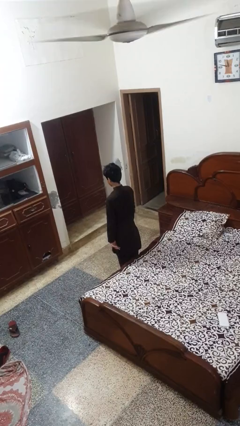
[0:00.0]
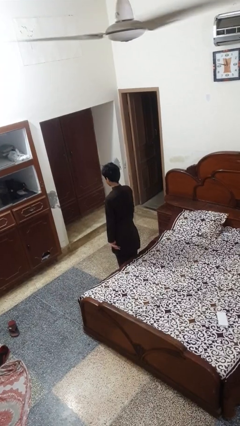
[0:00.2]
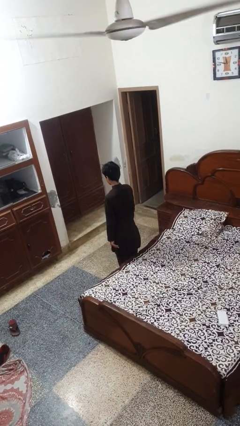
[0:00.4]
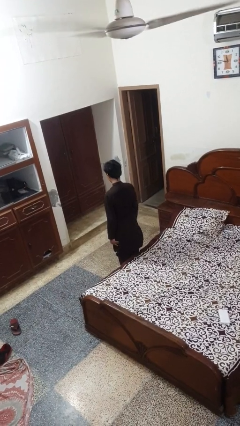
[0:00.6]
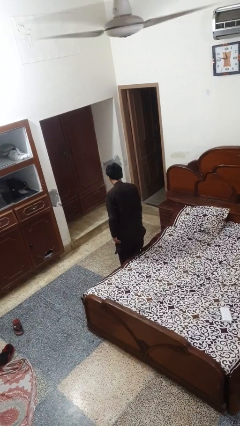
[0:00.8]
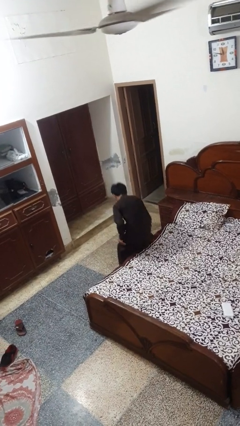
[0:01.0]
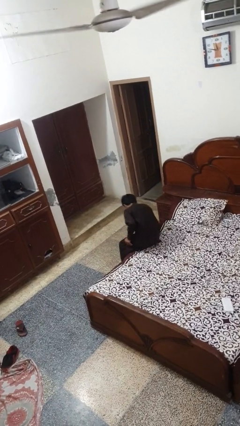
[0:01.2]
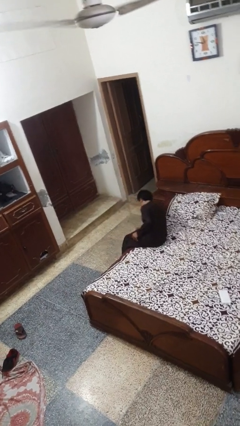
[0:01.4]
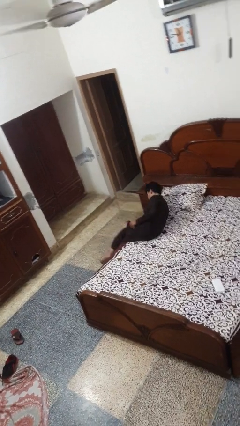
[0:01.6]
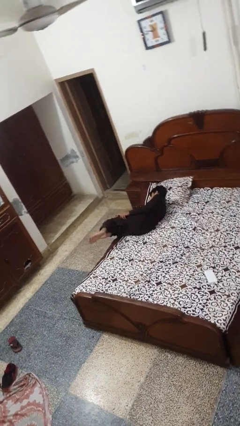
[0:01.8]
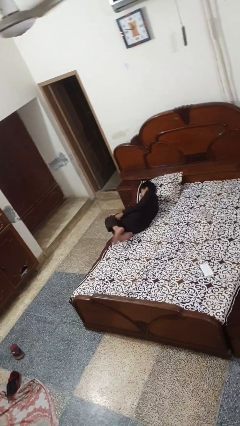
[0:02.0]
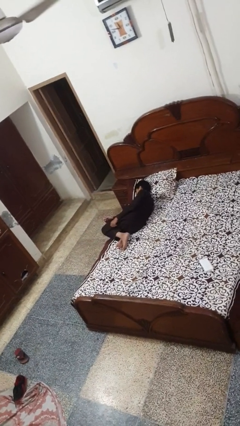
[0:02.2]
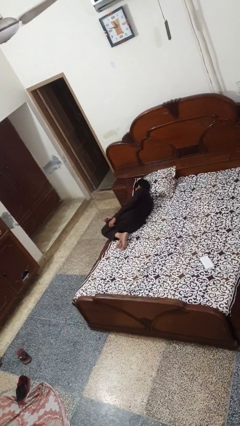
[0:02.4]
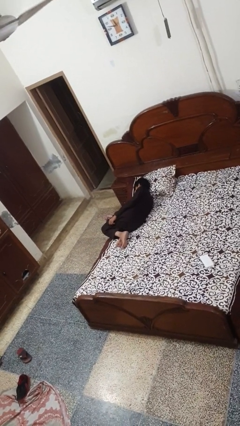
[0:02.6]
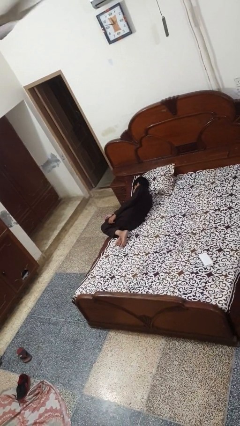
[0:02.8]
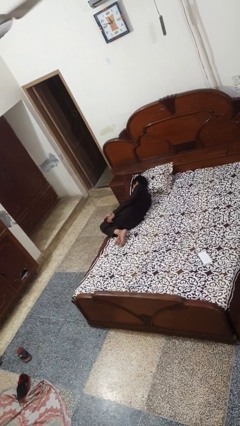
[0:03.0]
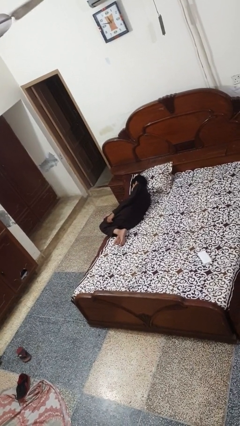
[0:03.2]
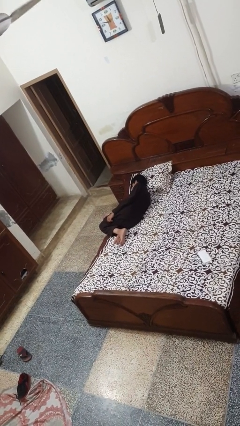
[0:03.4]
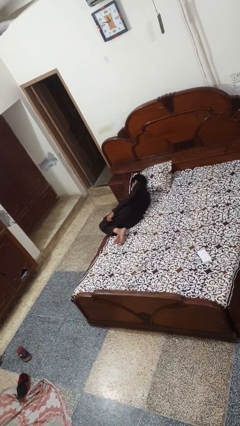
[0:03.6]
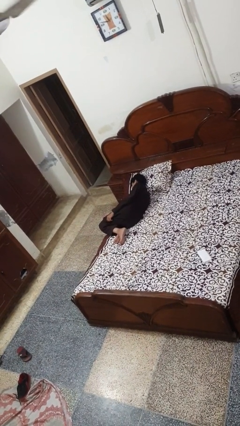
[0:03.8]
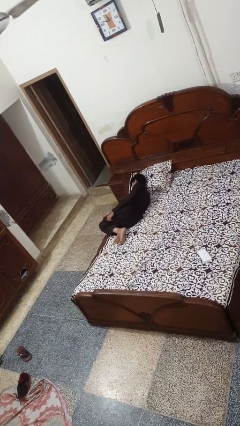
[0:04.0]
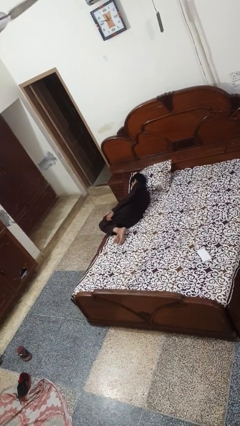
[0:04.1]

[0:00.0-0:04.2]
person lies down on bed

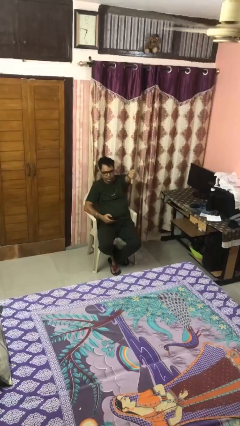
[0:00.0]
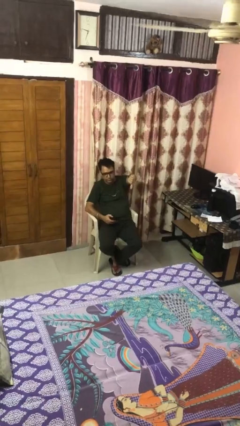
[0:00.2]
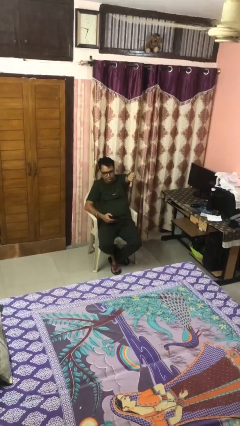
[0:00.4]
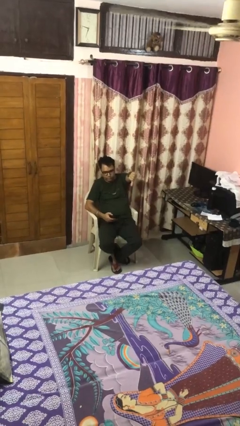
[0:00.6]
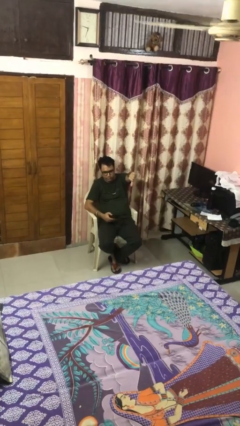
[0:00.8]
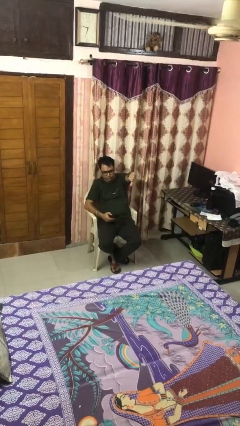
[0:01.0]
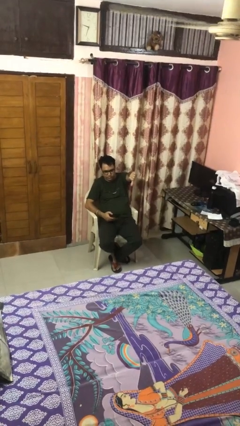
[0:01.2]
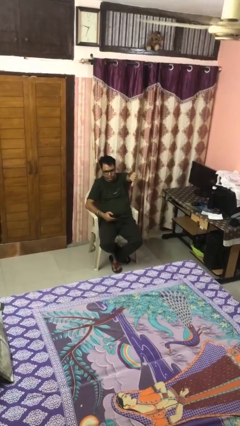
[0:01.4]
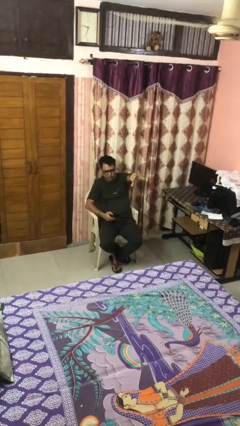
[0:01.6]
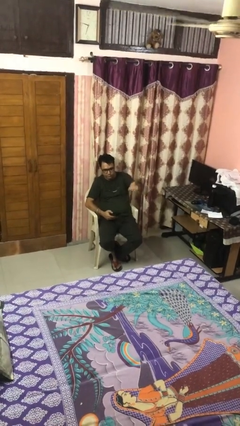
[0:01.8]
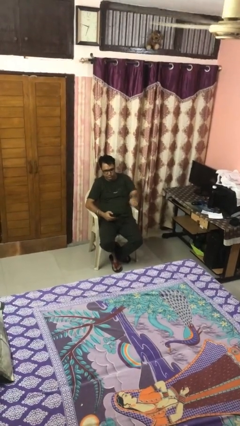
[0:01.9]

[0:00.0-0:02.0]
person gestures thumbs down

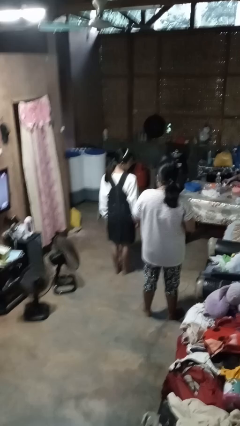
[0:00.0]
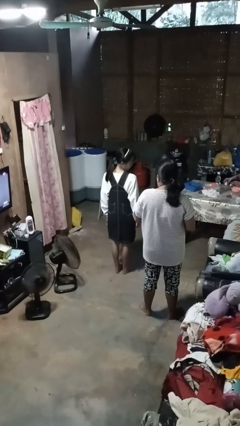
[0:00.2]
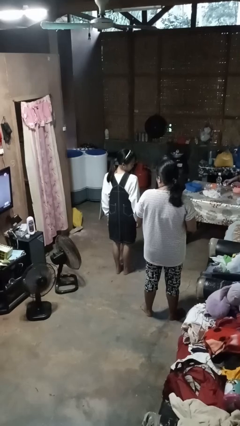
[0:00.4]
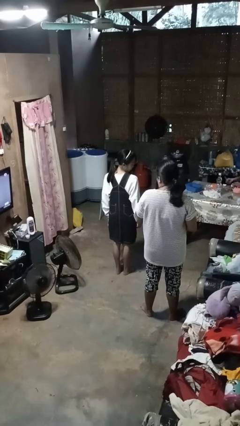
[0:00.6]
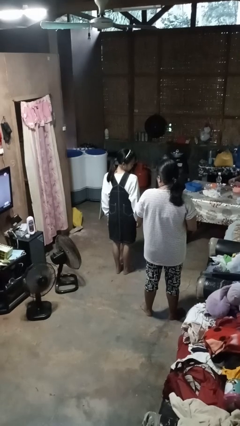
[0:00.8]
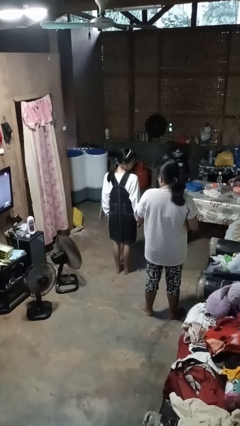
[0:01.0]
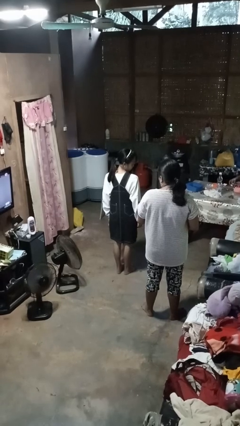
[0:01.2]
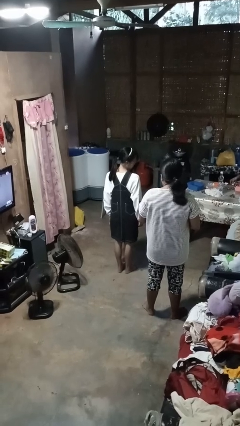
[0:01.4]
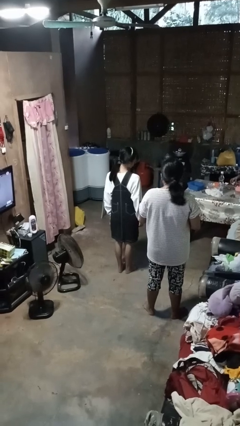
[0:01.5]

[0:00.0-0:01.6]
person looks over shoulder

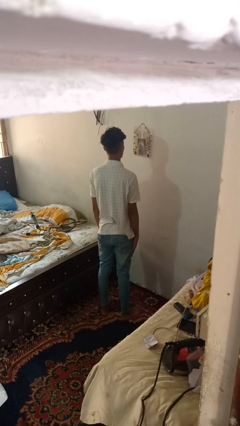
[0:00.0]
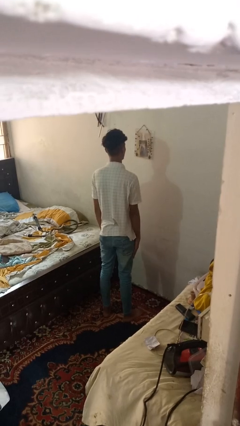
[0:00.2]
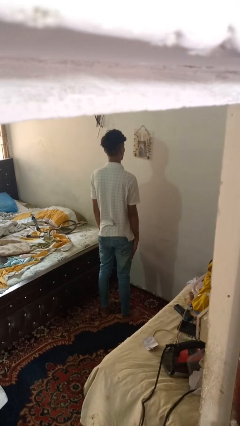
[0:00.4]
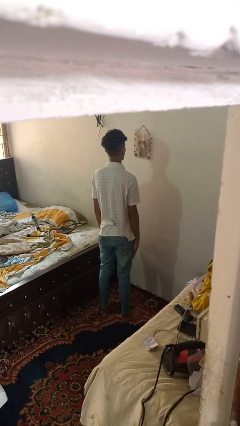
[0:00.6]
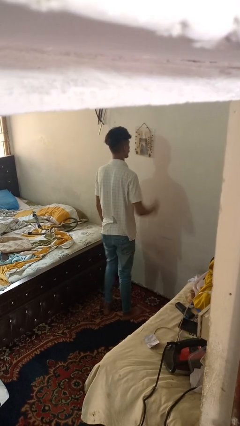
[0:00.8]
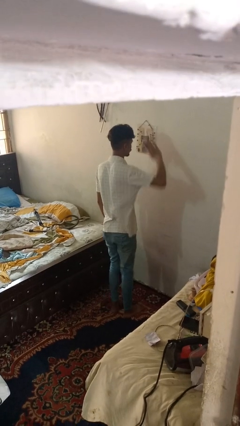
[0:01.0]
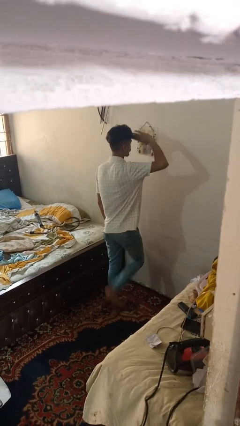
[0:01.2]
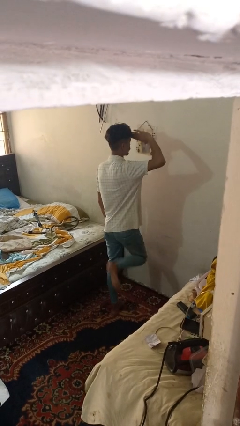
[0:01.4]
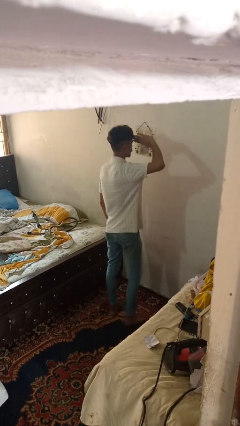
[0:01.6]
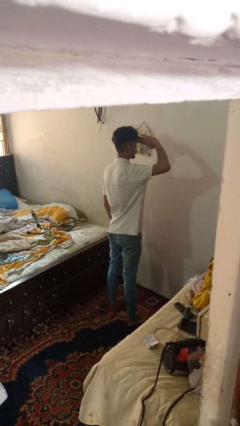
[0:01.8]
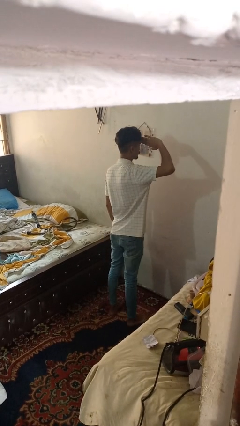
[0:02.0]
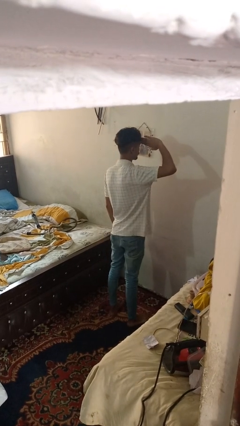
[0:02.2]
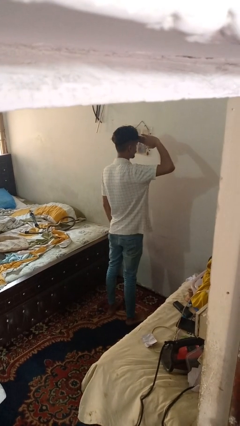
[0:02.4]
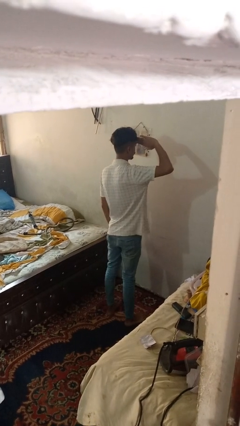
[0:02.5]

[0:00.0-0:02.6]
person salutes

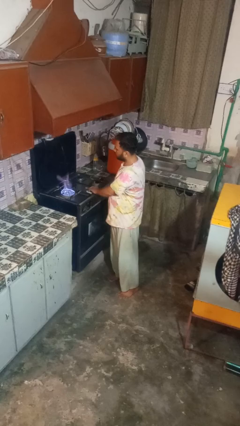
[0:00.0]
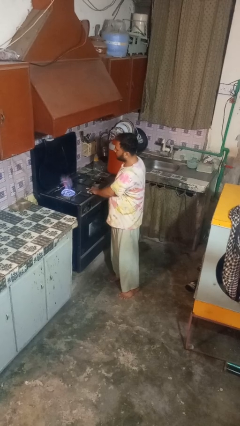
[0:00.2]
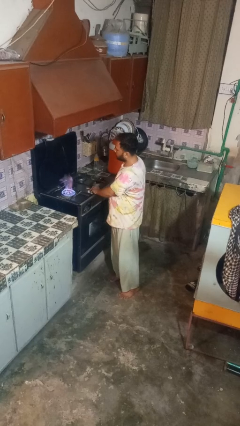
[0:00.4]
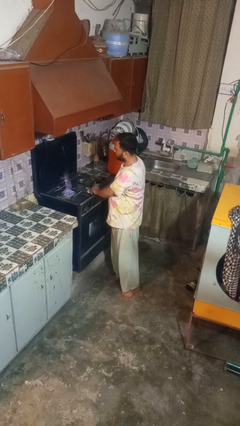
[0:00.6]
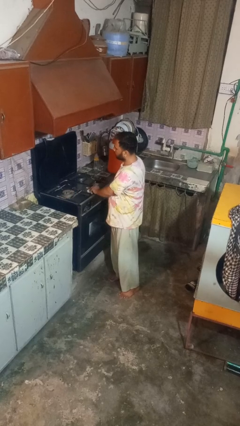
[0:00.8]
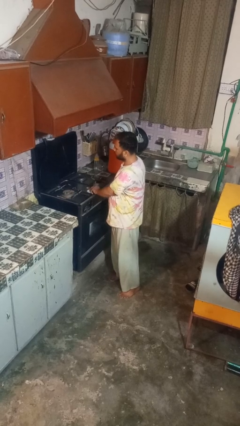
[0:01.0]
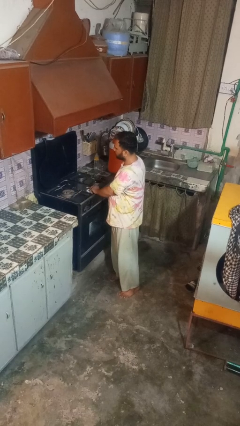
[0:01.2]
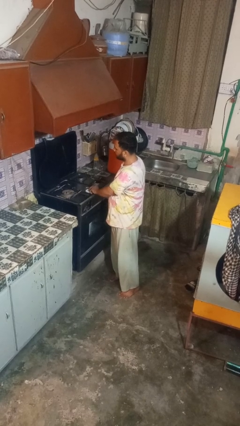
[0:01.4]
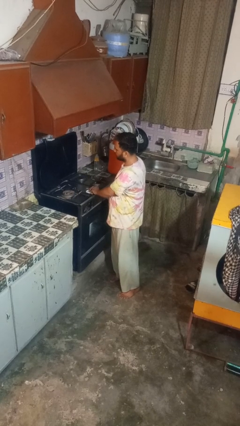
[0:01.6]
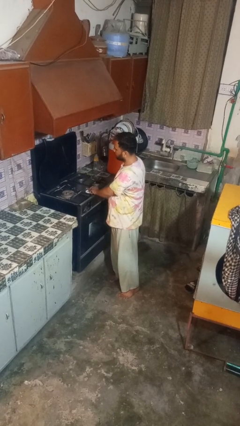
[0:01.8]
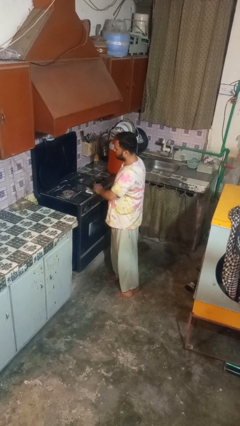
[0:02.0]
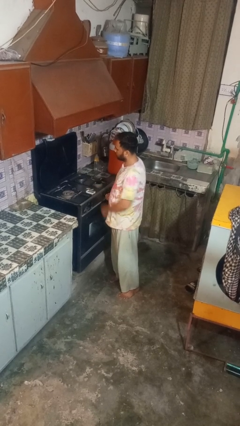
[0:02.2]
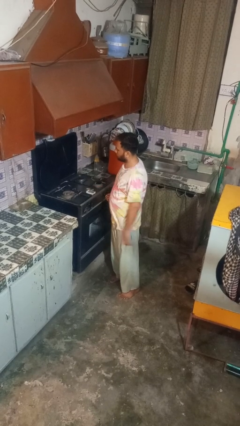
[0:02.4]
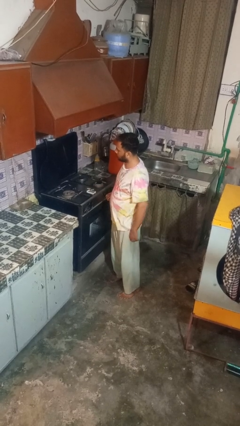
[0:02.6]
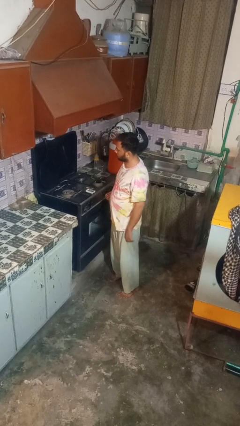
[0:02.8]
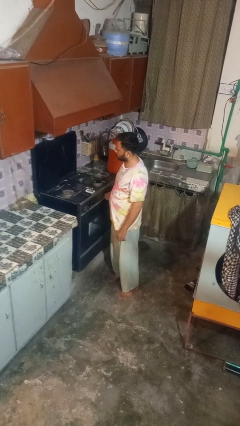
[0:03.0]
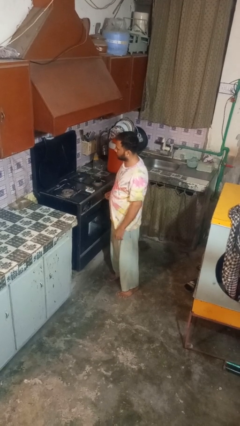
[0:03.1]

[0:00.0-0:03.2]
person turns off stovetop

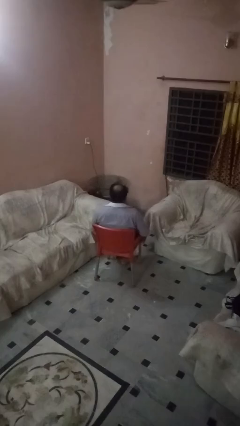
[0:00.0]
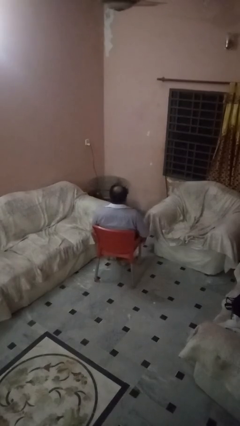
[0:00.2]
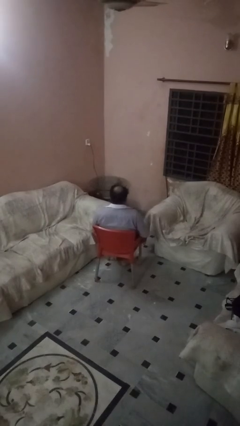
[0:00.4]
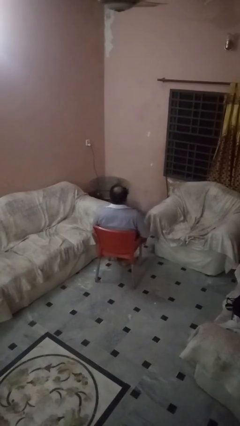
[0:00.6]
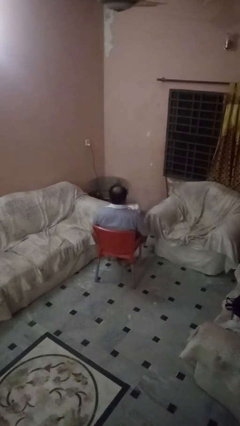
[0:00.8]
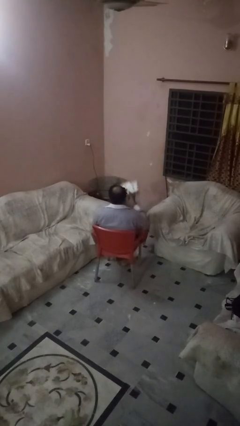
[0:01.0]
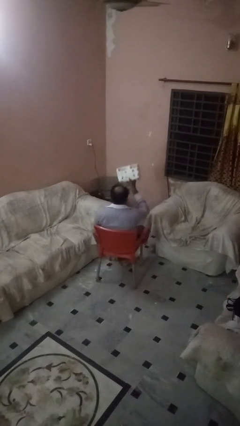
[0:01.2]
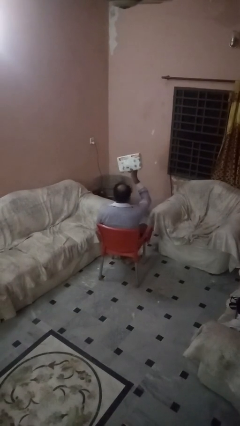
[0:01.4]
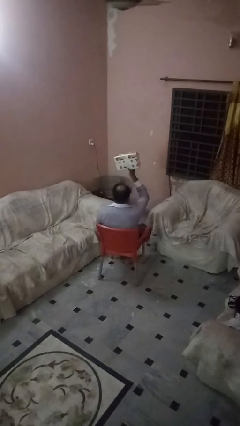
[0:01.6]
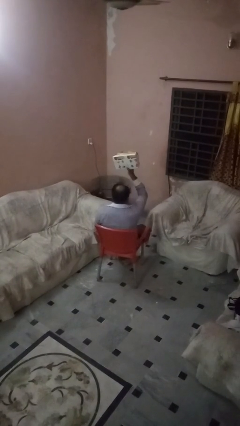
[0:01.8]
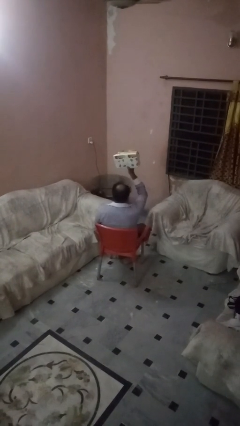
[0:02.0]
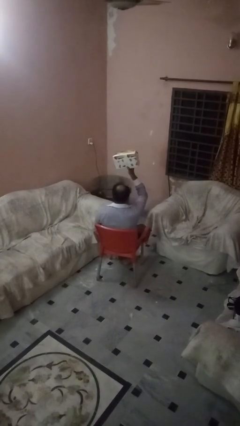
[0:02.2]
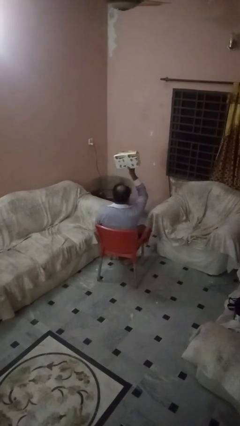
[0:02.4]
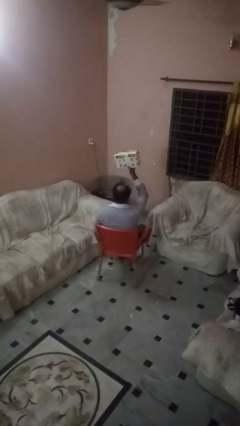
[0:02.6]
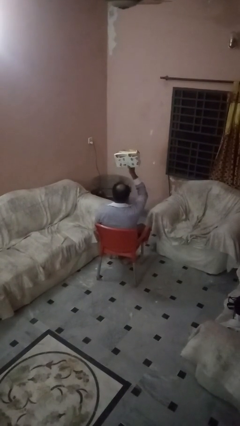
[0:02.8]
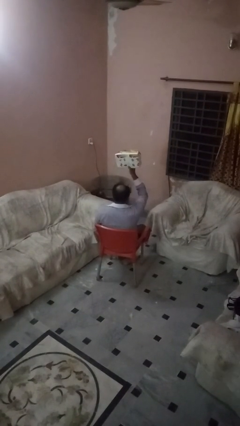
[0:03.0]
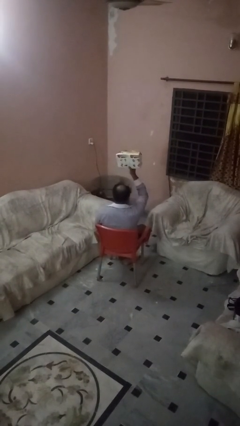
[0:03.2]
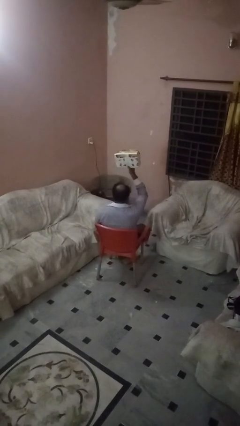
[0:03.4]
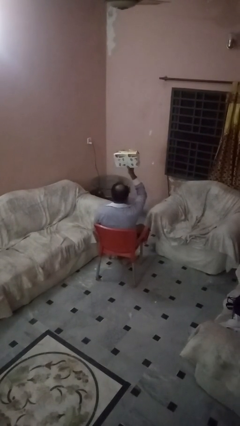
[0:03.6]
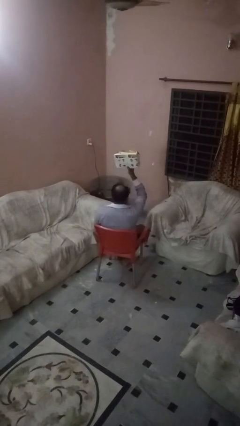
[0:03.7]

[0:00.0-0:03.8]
person holds object above head

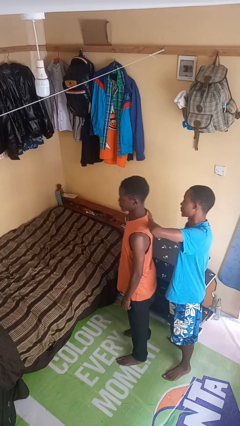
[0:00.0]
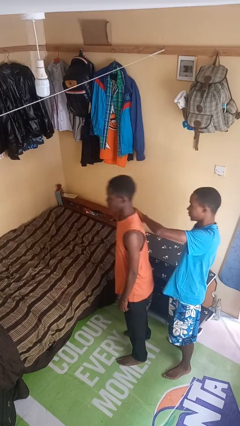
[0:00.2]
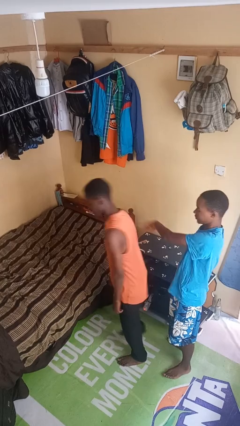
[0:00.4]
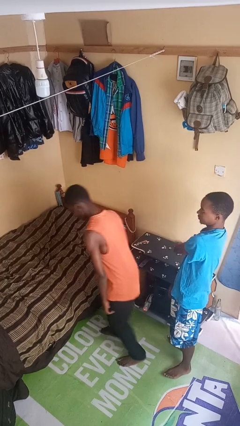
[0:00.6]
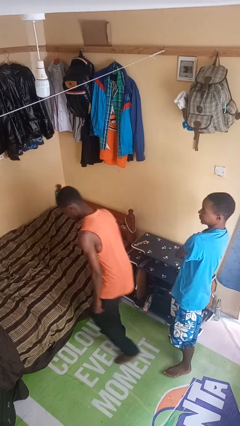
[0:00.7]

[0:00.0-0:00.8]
person shoves person
